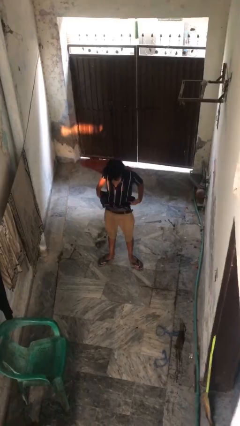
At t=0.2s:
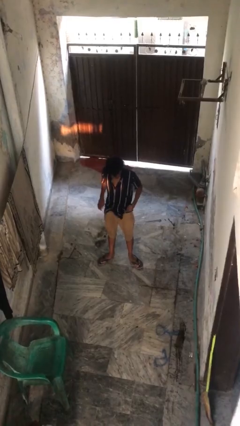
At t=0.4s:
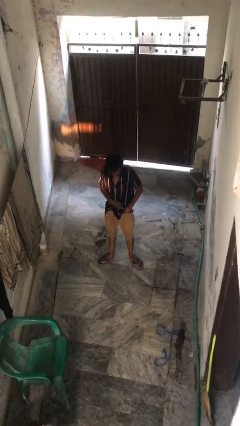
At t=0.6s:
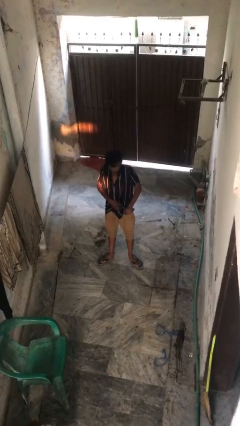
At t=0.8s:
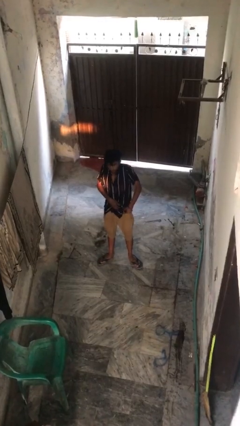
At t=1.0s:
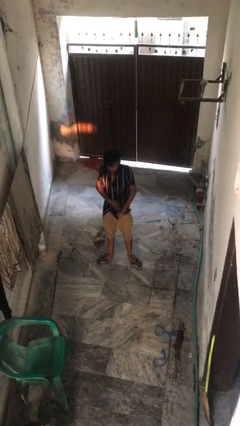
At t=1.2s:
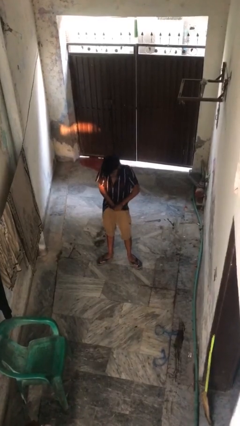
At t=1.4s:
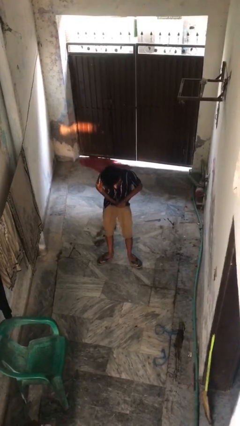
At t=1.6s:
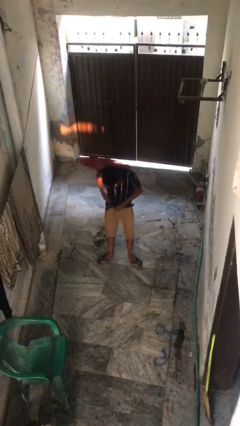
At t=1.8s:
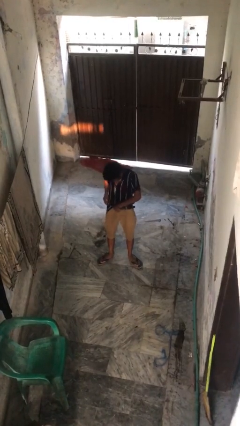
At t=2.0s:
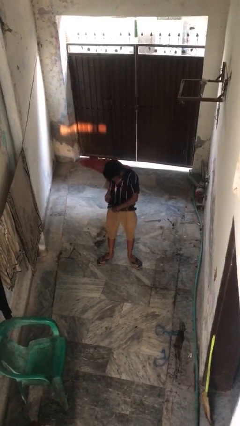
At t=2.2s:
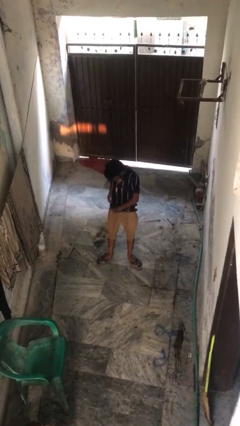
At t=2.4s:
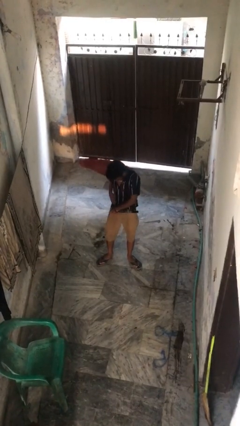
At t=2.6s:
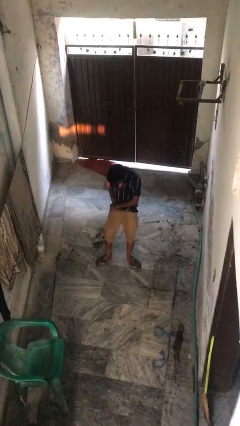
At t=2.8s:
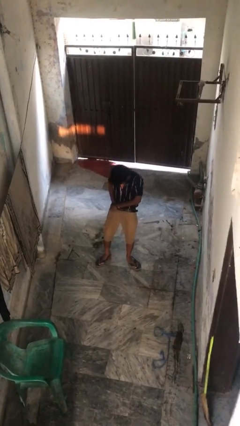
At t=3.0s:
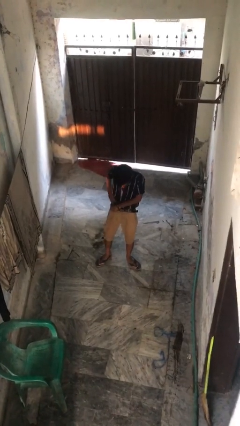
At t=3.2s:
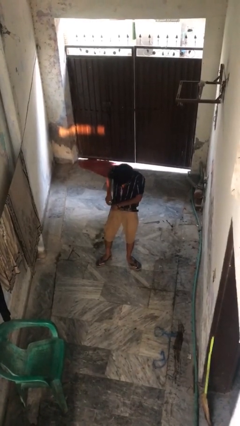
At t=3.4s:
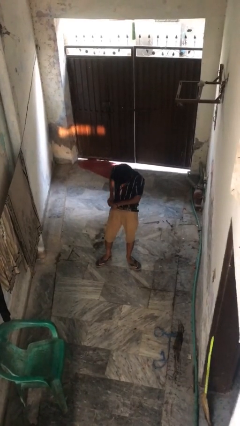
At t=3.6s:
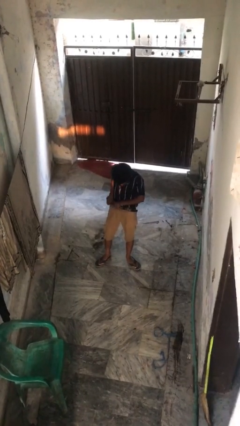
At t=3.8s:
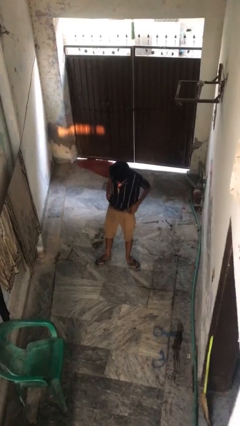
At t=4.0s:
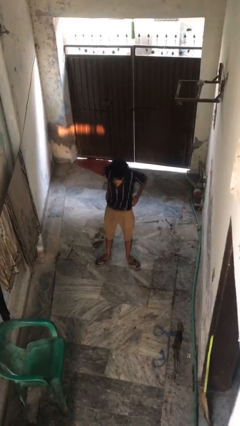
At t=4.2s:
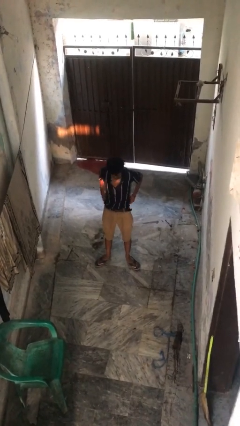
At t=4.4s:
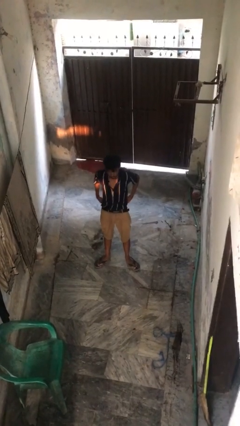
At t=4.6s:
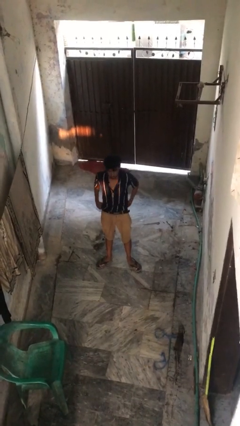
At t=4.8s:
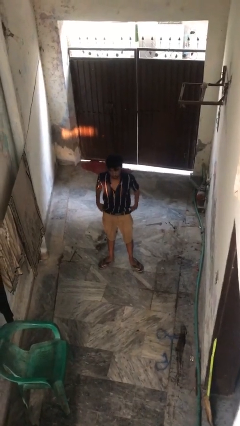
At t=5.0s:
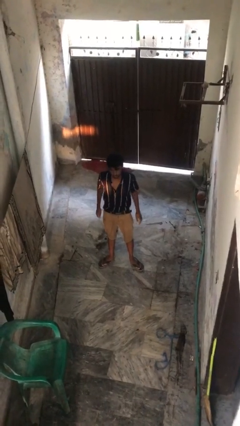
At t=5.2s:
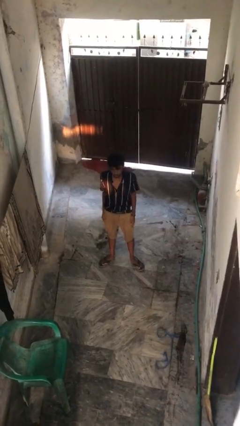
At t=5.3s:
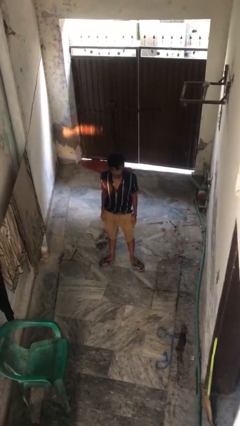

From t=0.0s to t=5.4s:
person tucks in shirt

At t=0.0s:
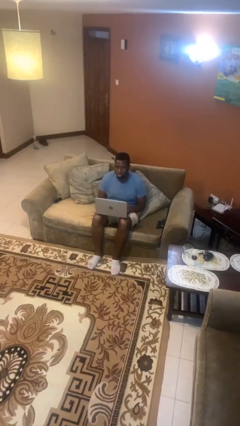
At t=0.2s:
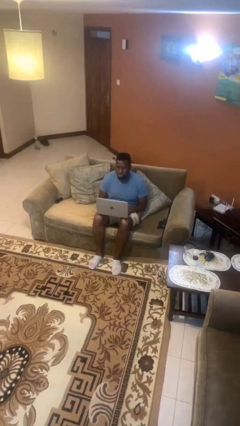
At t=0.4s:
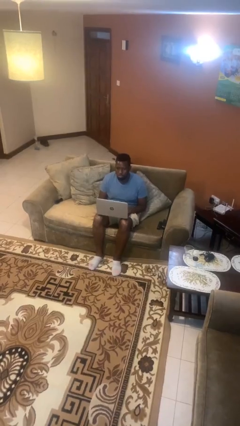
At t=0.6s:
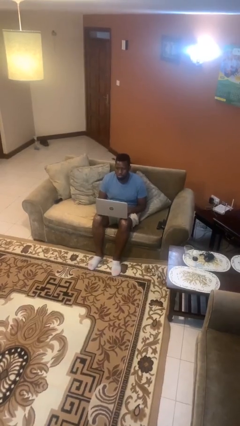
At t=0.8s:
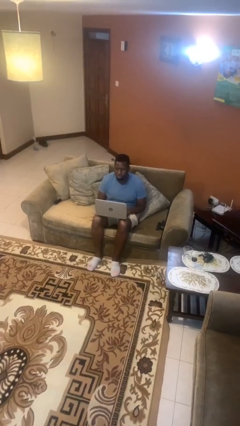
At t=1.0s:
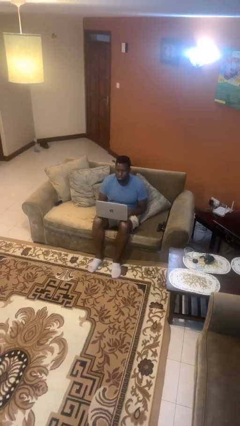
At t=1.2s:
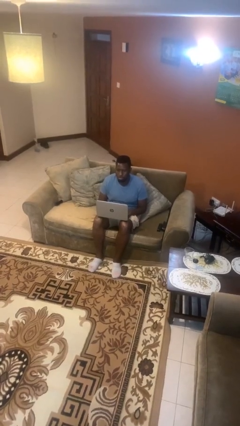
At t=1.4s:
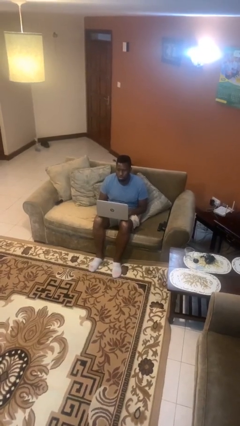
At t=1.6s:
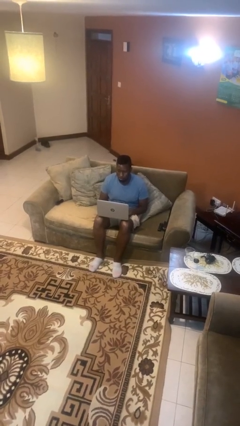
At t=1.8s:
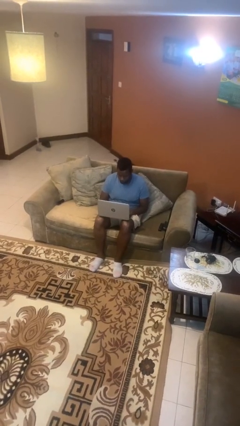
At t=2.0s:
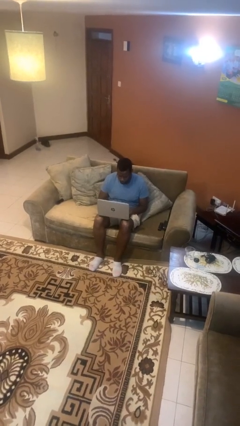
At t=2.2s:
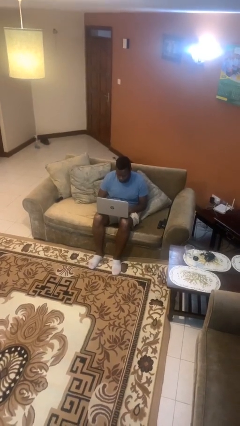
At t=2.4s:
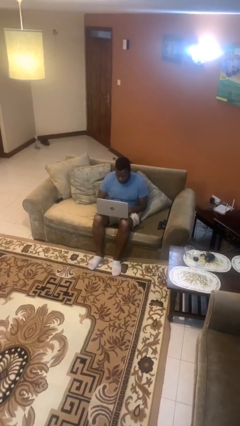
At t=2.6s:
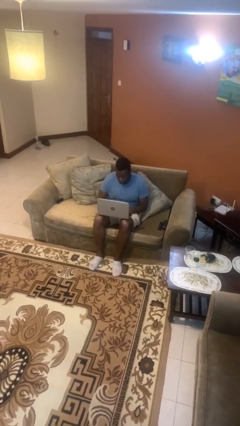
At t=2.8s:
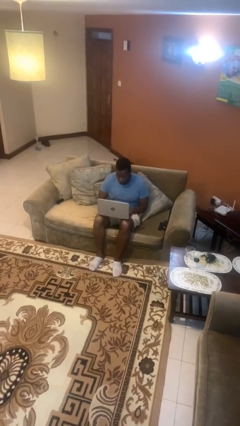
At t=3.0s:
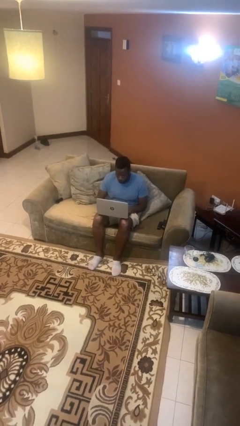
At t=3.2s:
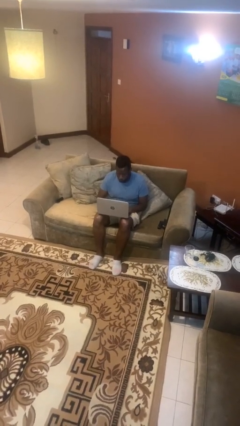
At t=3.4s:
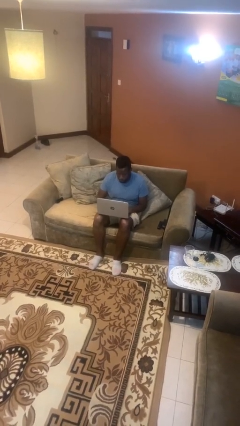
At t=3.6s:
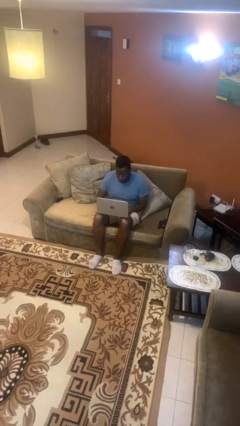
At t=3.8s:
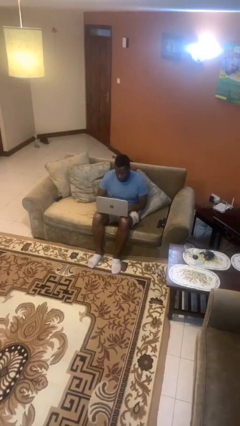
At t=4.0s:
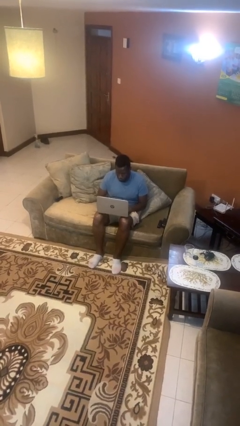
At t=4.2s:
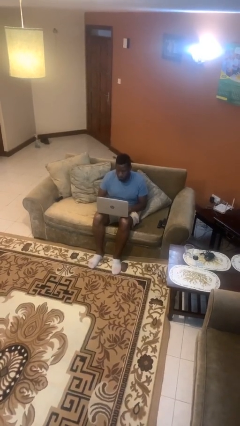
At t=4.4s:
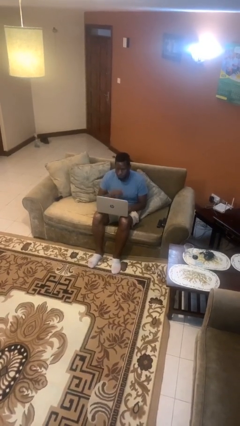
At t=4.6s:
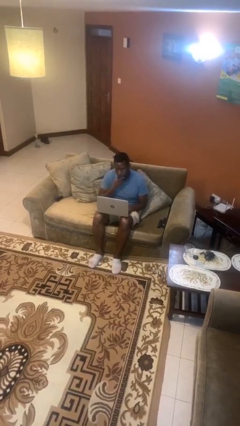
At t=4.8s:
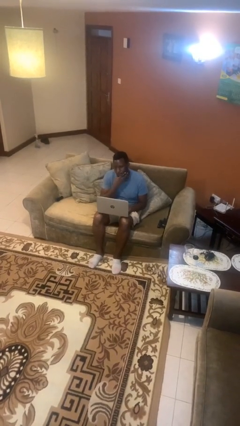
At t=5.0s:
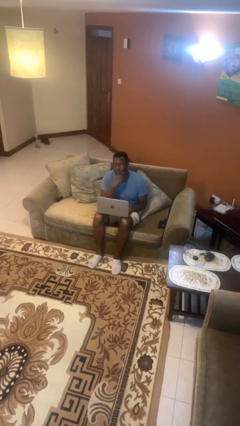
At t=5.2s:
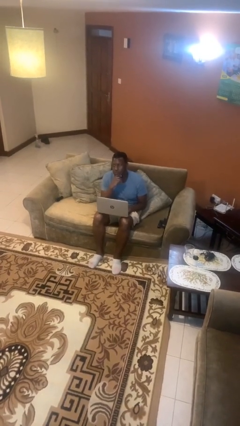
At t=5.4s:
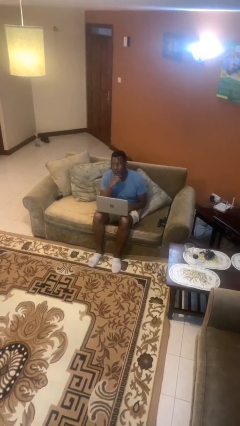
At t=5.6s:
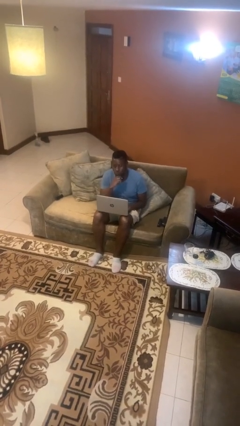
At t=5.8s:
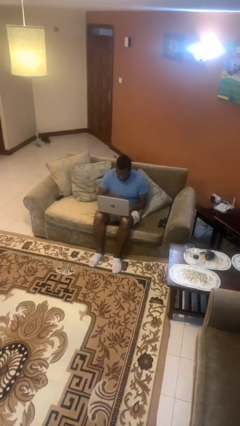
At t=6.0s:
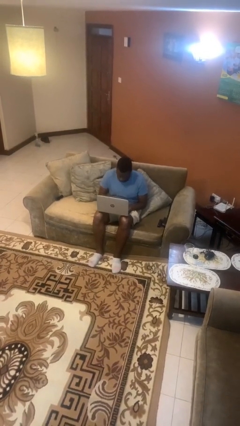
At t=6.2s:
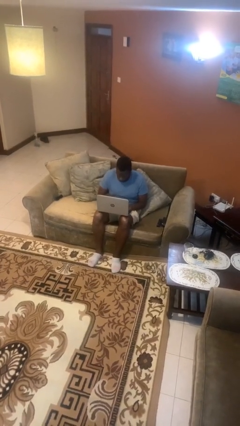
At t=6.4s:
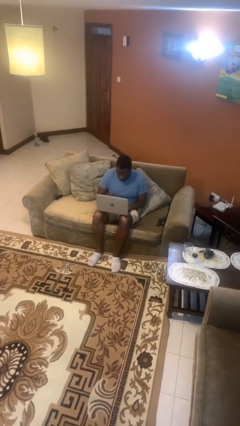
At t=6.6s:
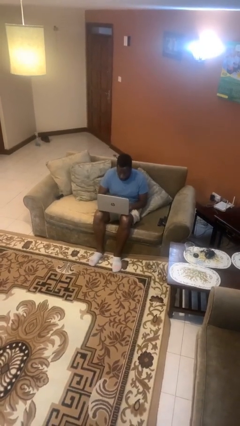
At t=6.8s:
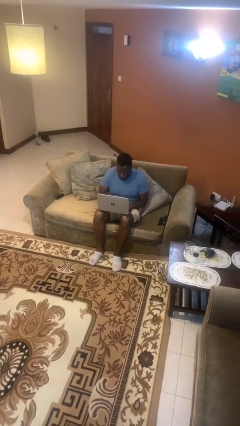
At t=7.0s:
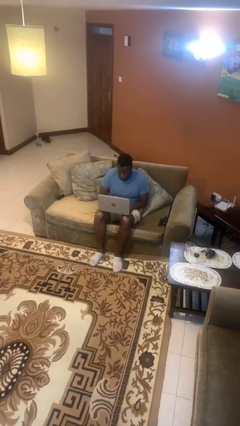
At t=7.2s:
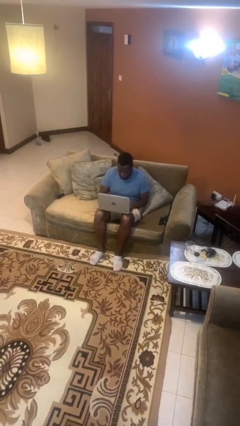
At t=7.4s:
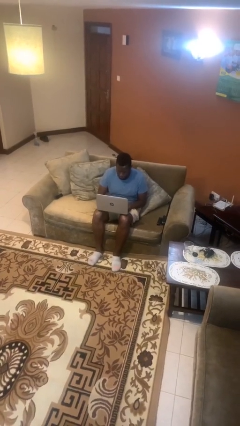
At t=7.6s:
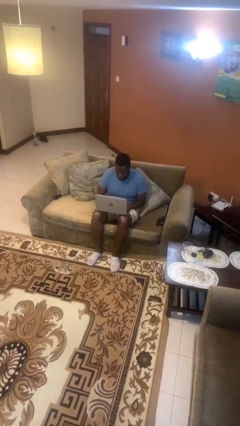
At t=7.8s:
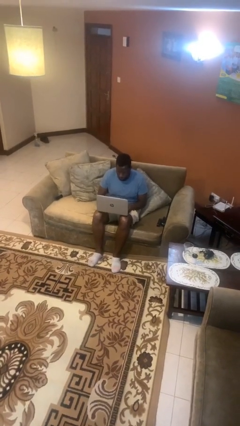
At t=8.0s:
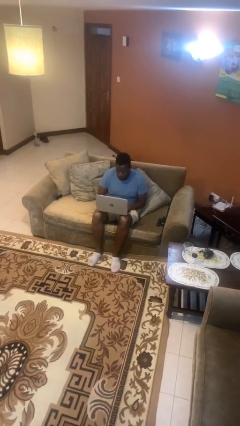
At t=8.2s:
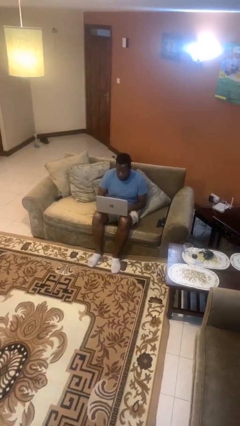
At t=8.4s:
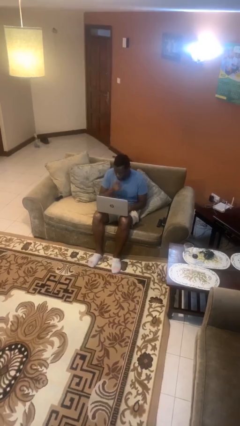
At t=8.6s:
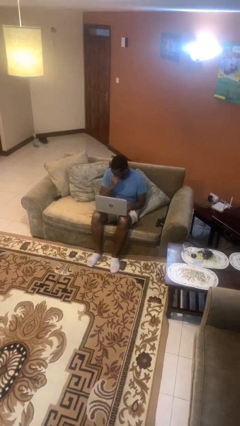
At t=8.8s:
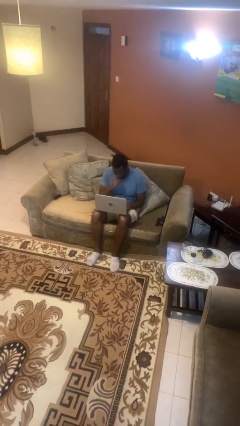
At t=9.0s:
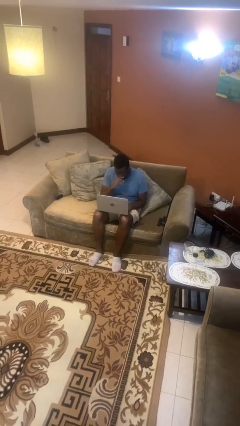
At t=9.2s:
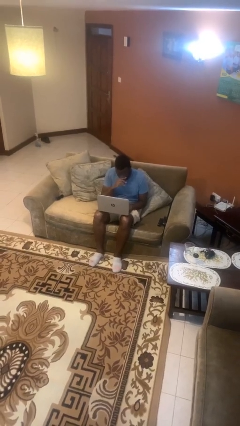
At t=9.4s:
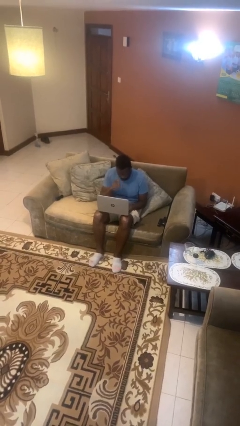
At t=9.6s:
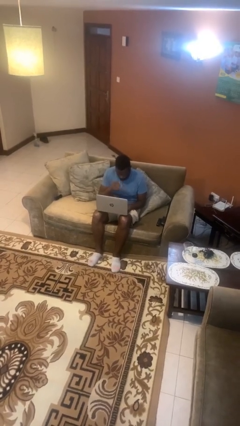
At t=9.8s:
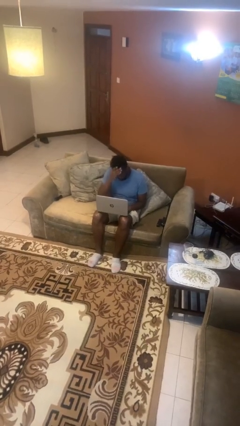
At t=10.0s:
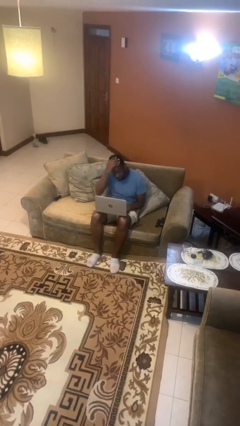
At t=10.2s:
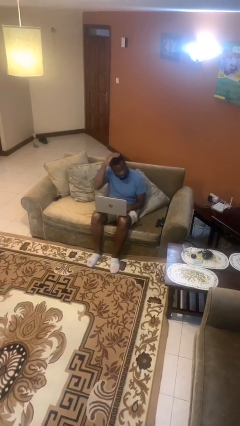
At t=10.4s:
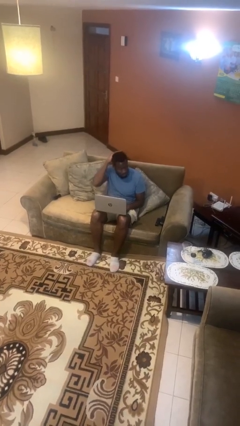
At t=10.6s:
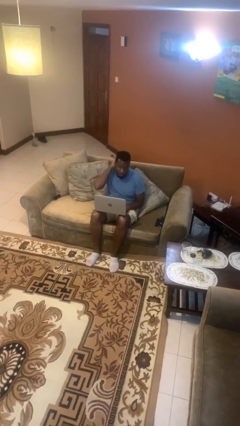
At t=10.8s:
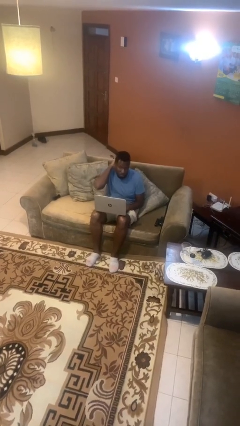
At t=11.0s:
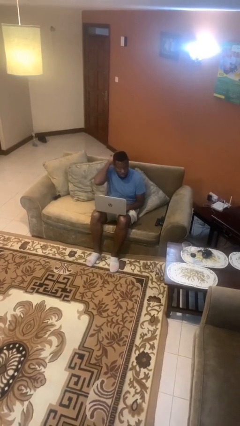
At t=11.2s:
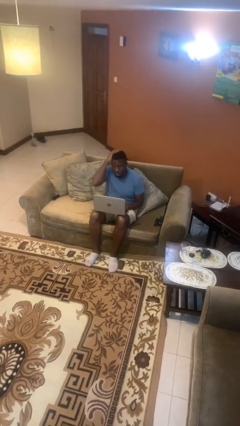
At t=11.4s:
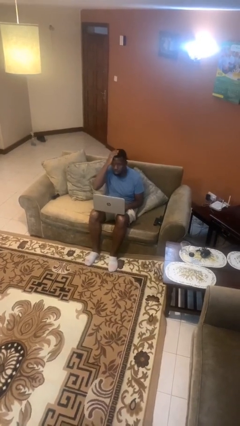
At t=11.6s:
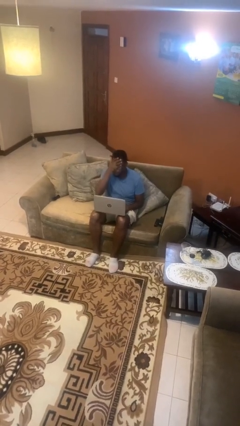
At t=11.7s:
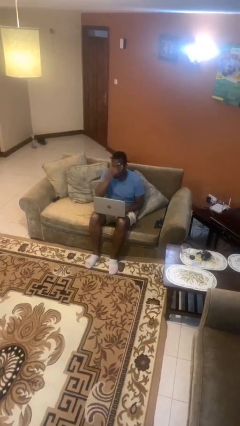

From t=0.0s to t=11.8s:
person interacts with laptop

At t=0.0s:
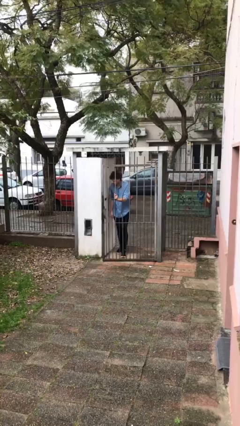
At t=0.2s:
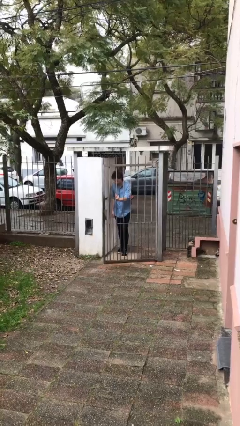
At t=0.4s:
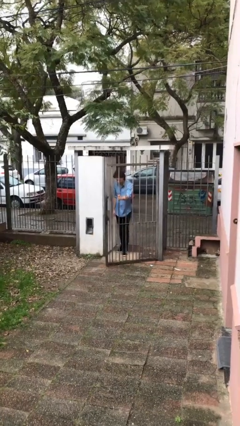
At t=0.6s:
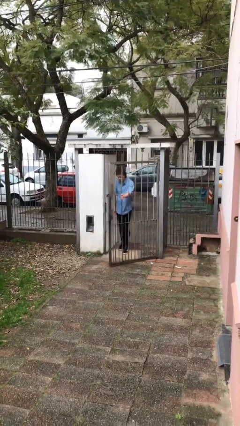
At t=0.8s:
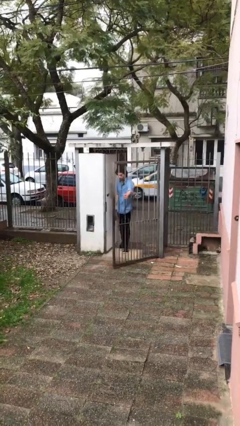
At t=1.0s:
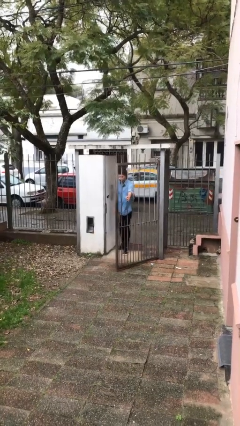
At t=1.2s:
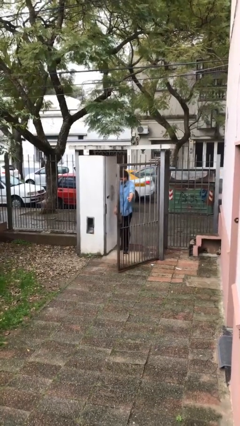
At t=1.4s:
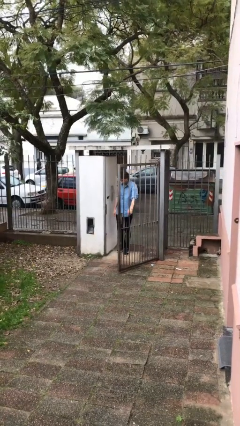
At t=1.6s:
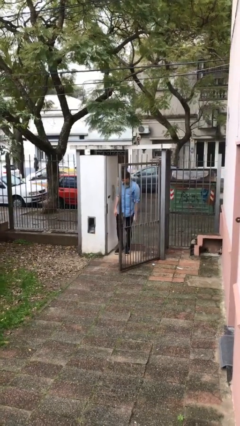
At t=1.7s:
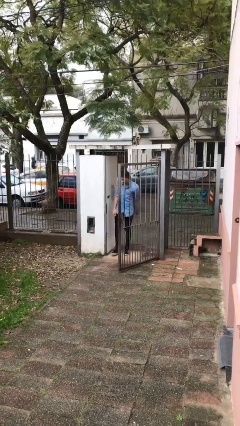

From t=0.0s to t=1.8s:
person opens facility door
